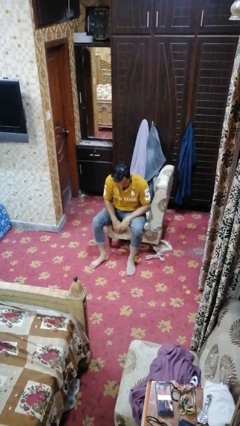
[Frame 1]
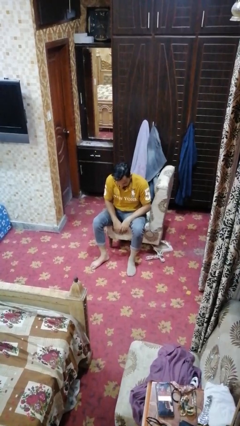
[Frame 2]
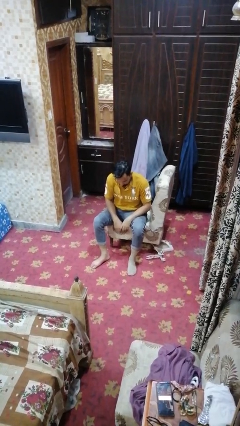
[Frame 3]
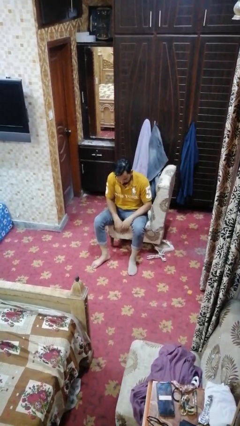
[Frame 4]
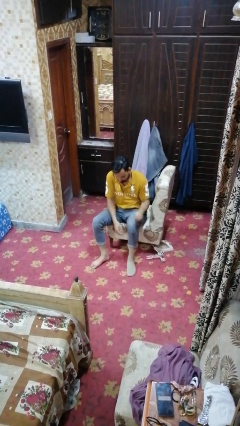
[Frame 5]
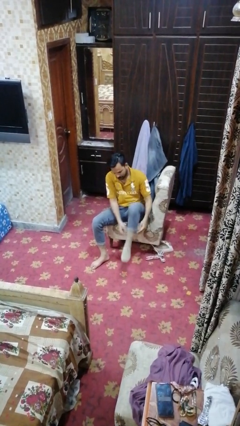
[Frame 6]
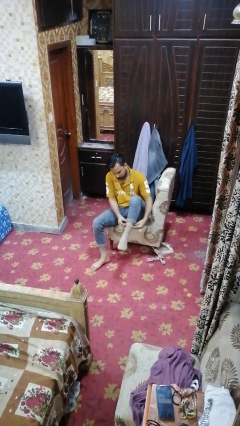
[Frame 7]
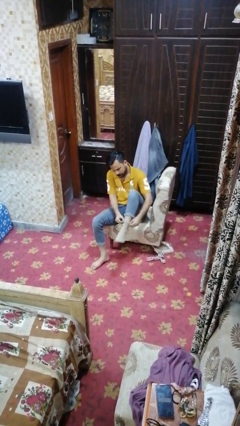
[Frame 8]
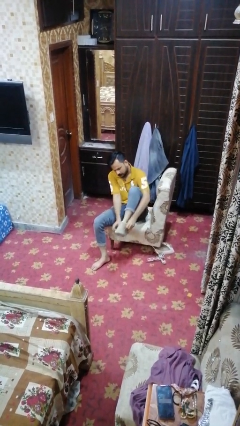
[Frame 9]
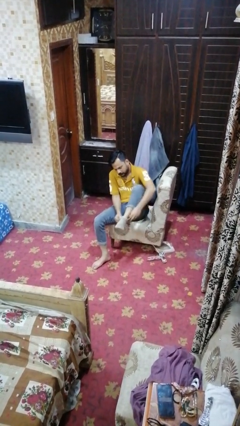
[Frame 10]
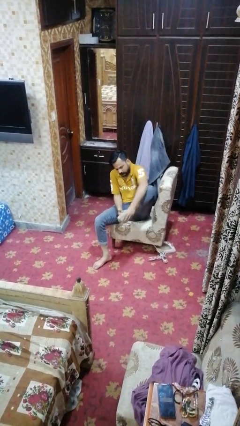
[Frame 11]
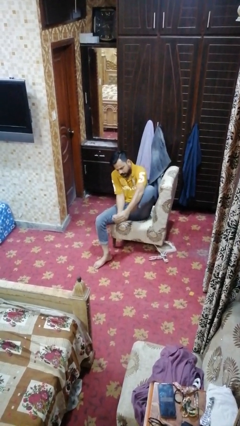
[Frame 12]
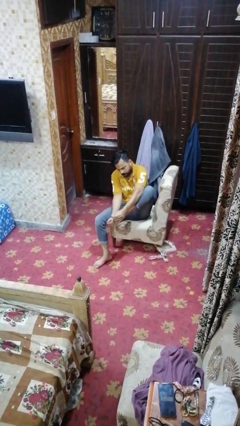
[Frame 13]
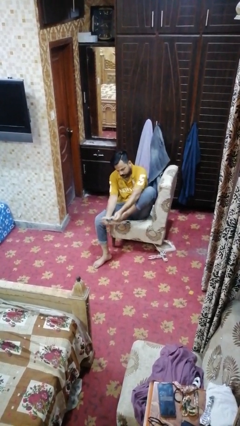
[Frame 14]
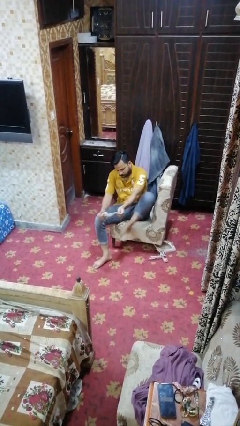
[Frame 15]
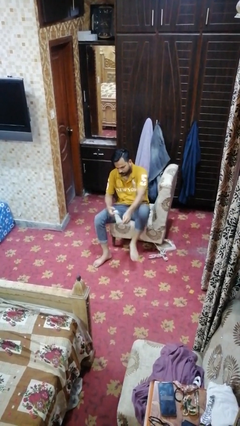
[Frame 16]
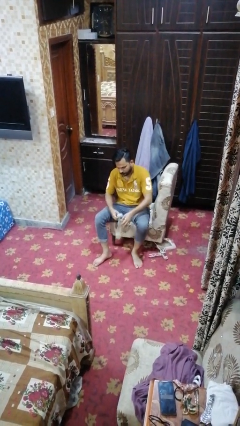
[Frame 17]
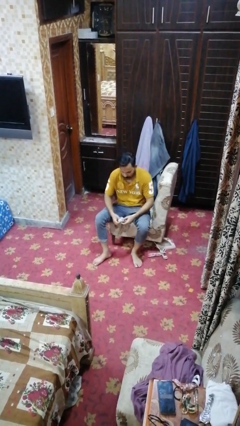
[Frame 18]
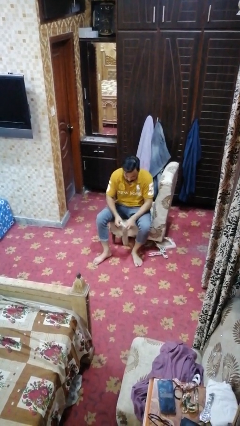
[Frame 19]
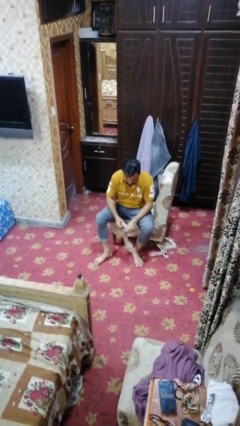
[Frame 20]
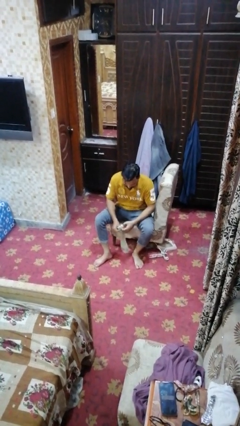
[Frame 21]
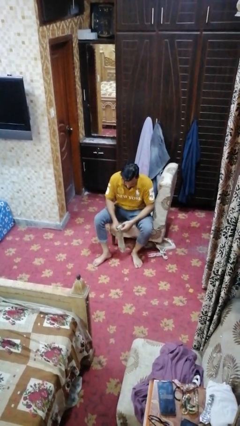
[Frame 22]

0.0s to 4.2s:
person takes off socks

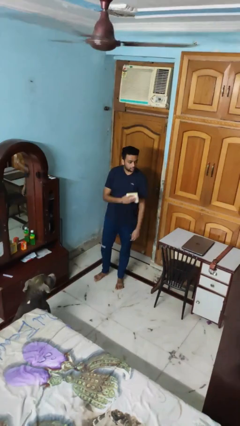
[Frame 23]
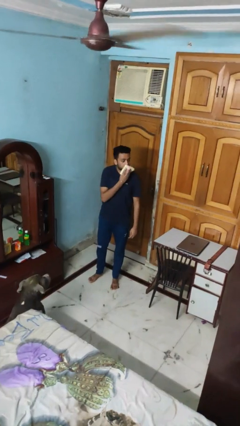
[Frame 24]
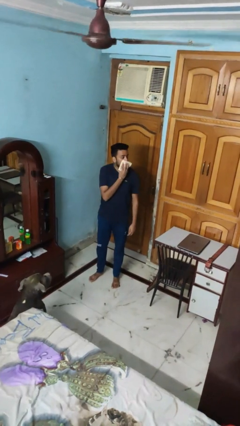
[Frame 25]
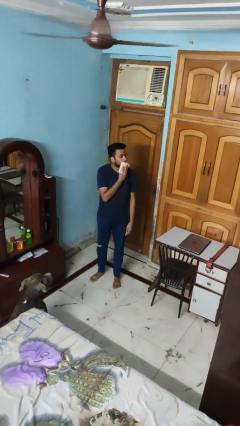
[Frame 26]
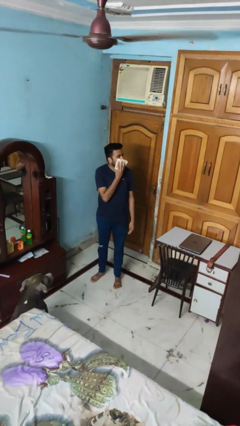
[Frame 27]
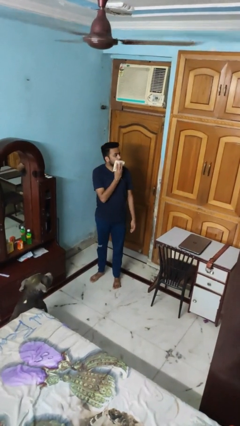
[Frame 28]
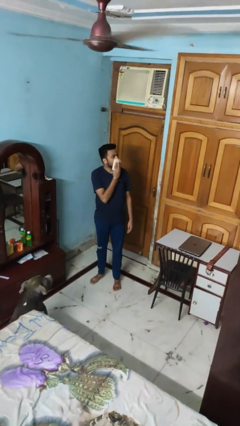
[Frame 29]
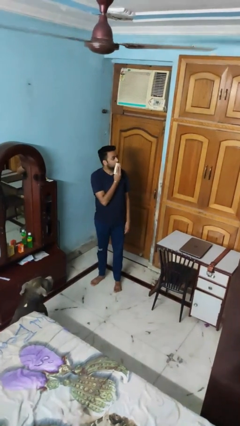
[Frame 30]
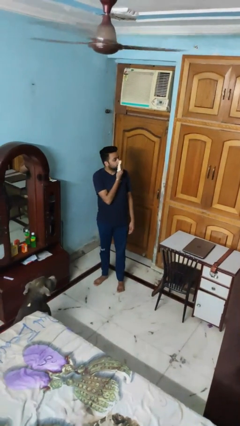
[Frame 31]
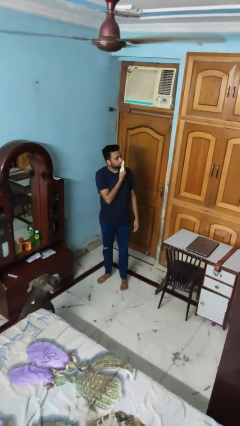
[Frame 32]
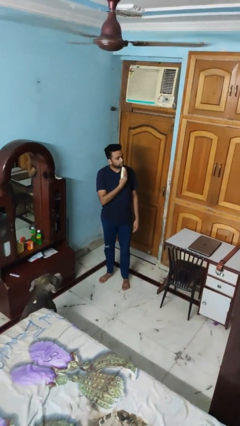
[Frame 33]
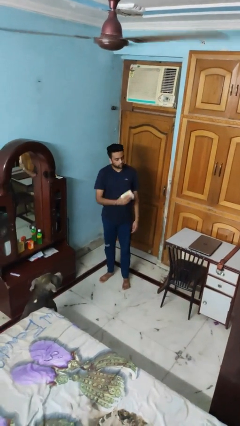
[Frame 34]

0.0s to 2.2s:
person wipes mouth with napkin

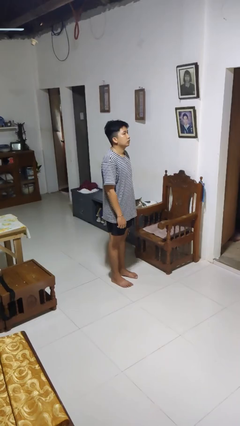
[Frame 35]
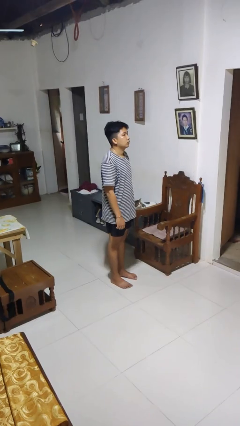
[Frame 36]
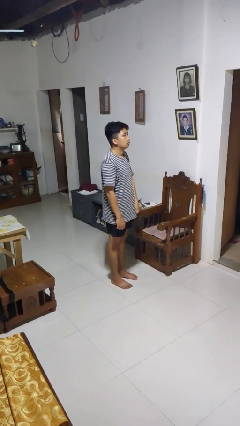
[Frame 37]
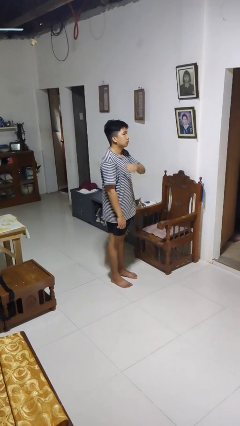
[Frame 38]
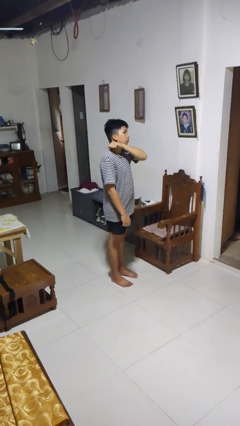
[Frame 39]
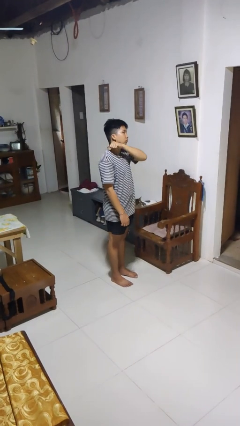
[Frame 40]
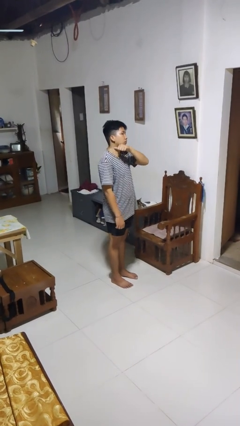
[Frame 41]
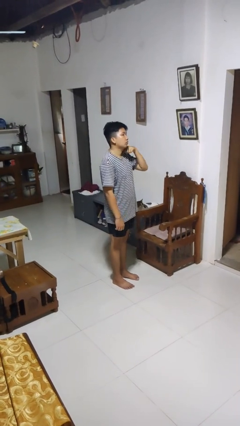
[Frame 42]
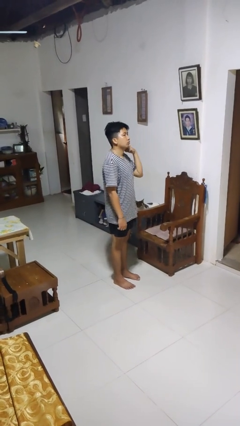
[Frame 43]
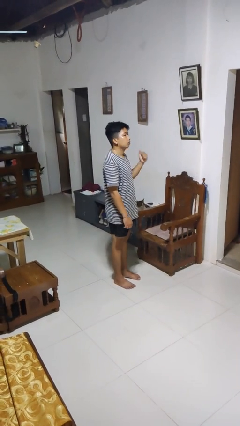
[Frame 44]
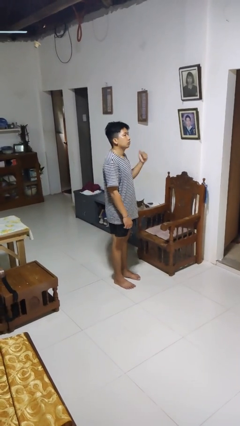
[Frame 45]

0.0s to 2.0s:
person gestures cut

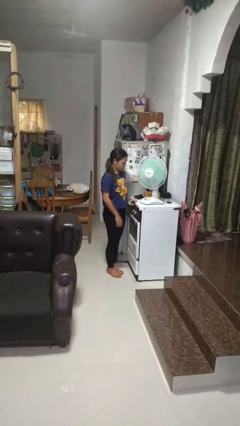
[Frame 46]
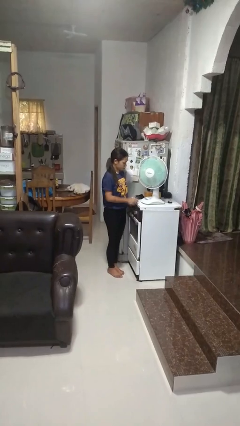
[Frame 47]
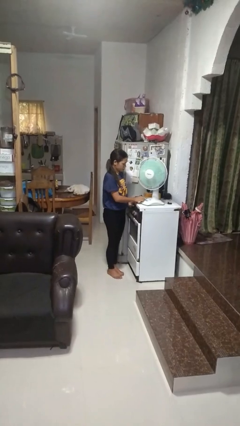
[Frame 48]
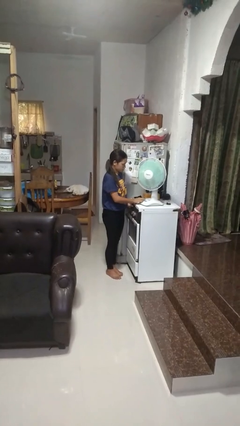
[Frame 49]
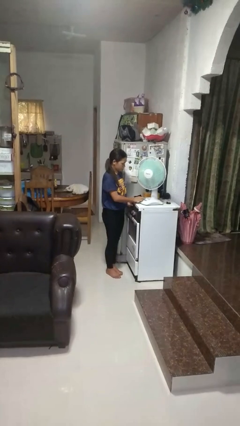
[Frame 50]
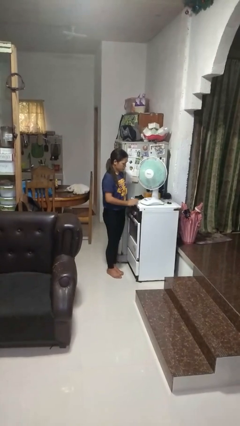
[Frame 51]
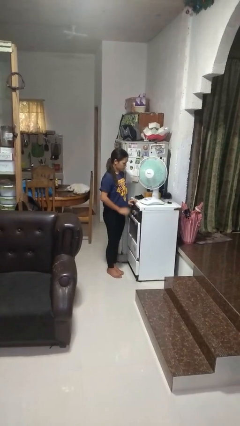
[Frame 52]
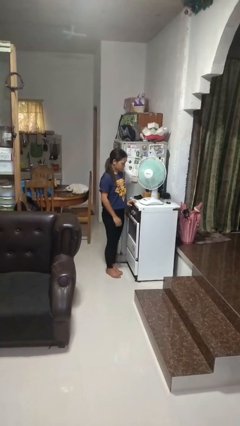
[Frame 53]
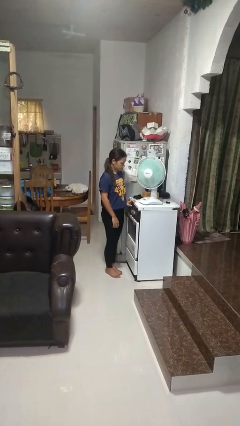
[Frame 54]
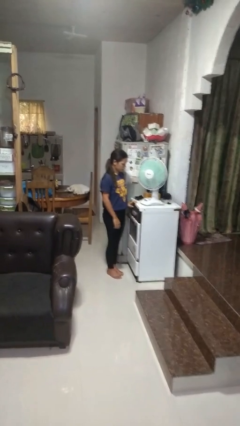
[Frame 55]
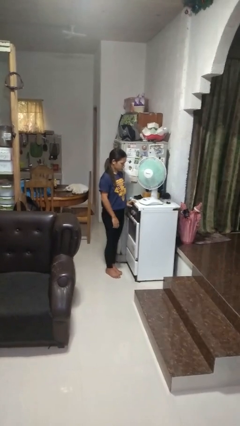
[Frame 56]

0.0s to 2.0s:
person turns off fan

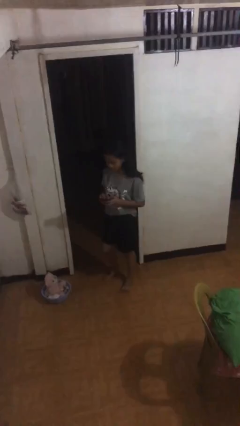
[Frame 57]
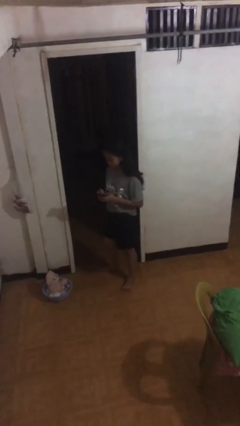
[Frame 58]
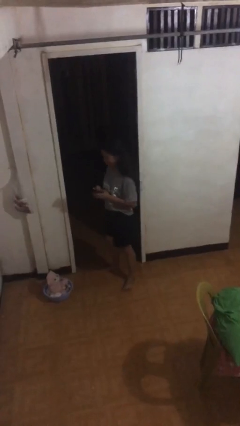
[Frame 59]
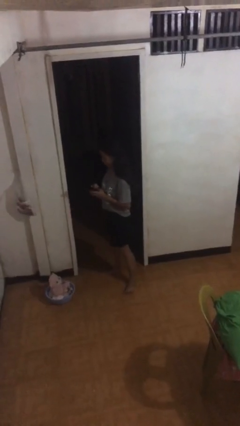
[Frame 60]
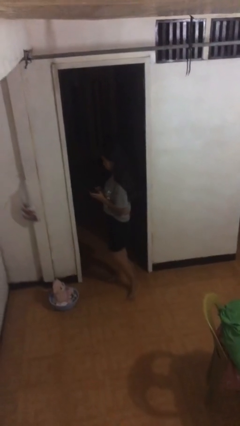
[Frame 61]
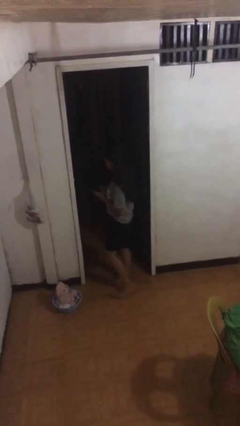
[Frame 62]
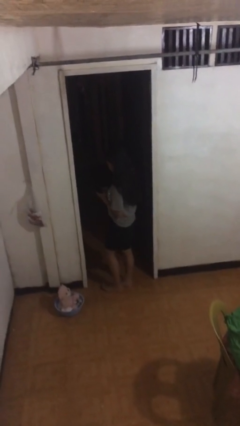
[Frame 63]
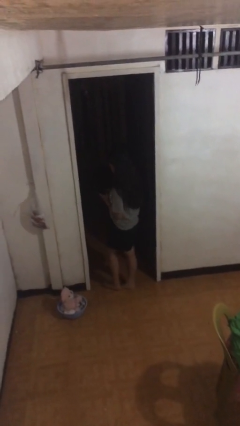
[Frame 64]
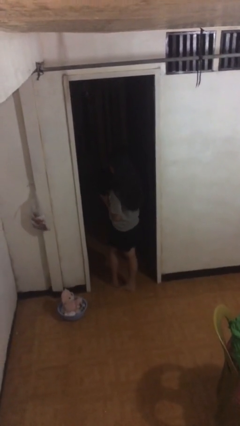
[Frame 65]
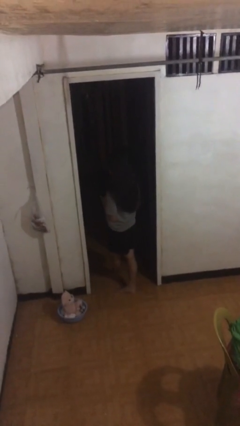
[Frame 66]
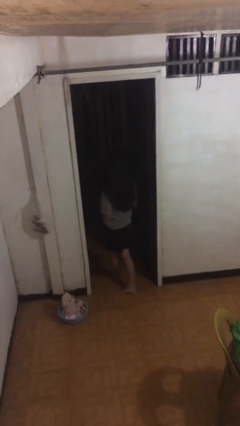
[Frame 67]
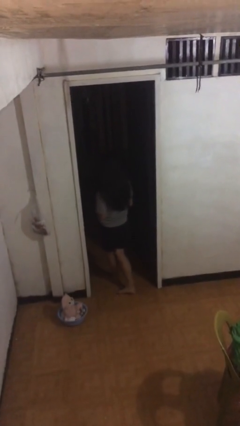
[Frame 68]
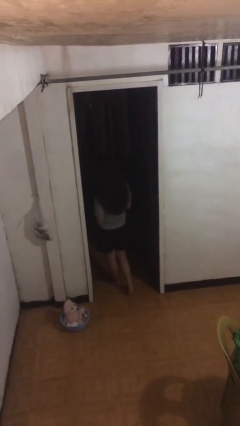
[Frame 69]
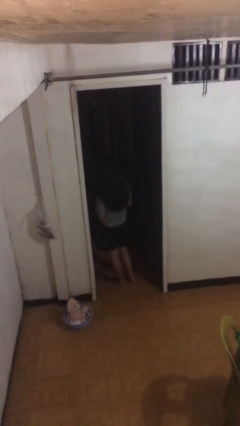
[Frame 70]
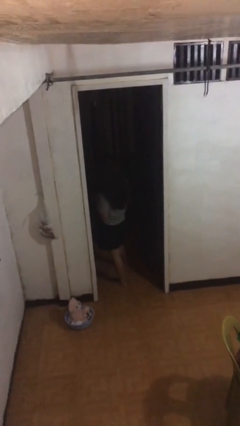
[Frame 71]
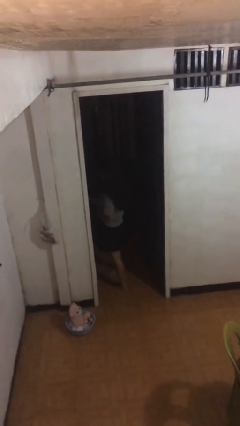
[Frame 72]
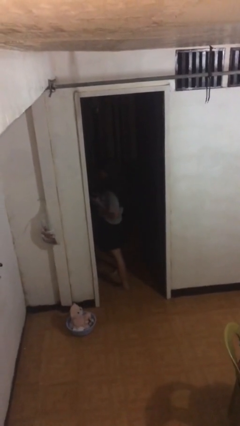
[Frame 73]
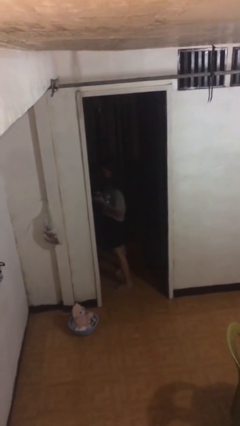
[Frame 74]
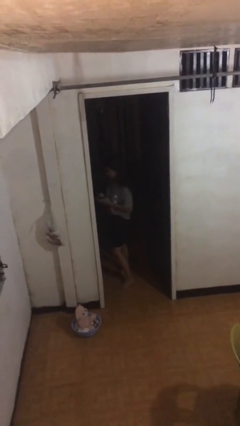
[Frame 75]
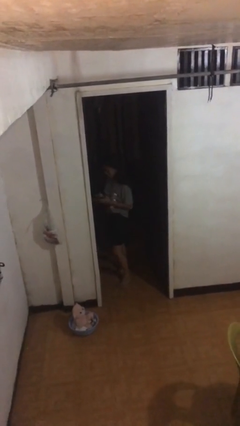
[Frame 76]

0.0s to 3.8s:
person exits scene through structure

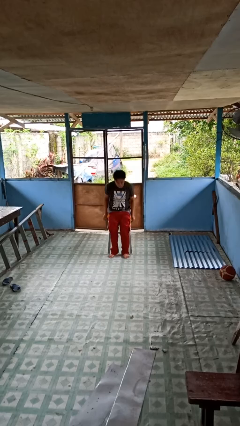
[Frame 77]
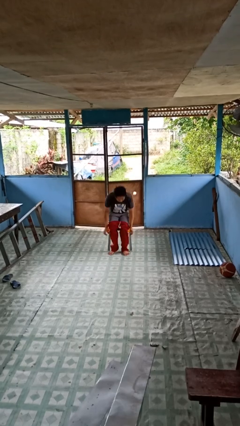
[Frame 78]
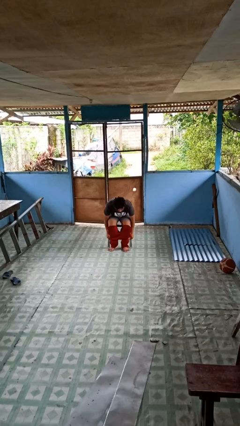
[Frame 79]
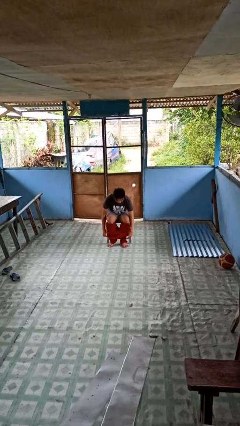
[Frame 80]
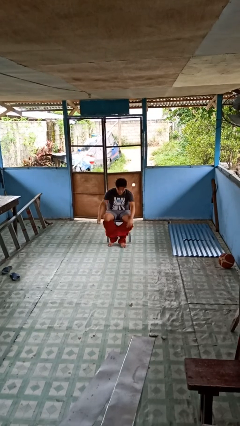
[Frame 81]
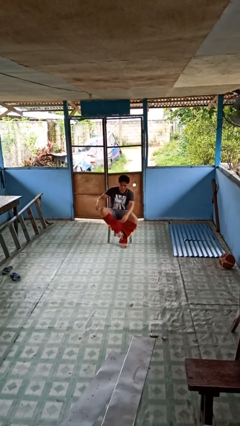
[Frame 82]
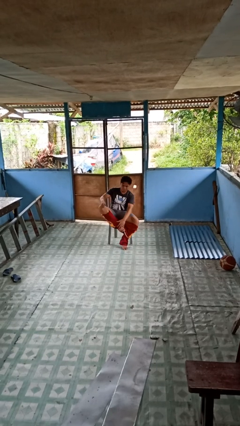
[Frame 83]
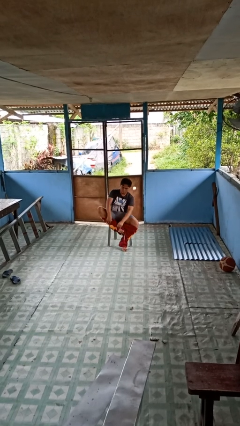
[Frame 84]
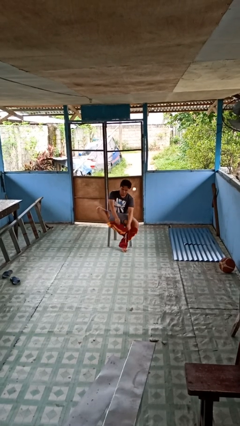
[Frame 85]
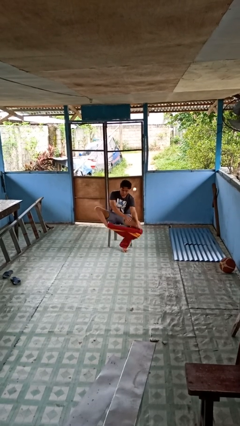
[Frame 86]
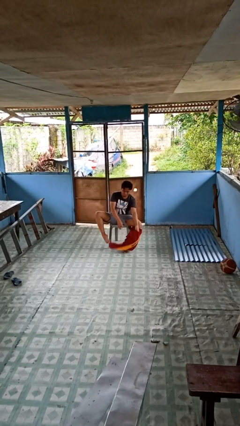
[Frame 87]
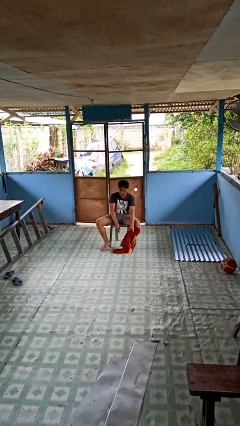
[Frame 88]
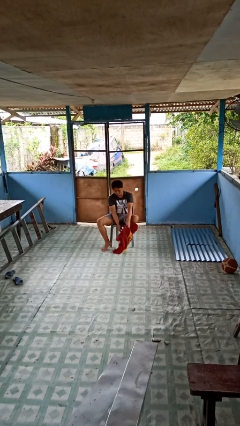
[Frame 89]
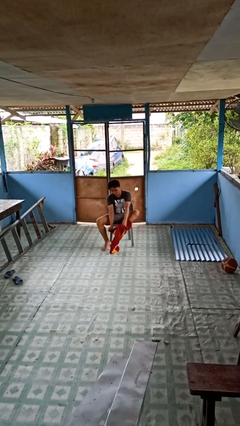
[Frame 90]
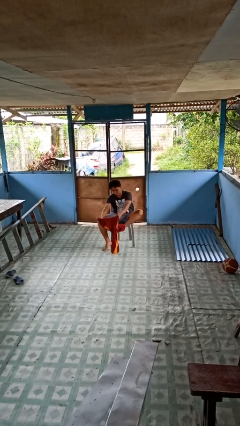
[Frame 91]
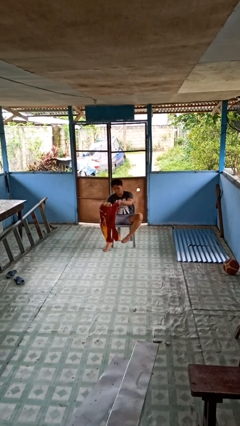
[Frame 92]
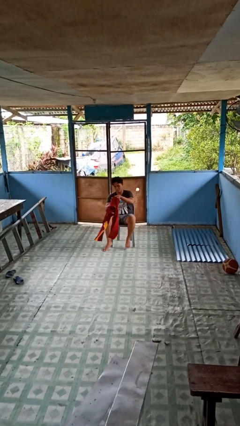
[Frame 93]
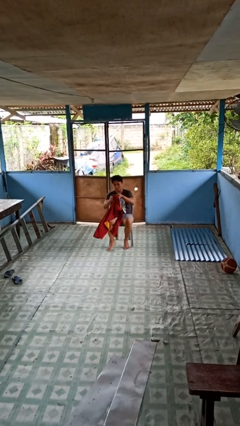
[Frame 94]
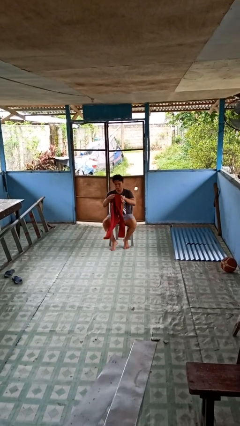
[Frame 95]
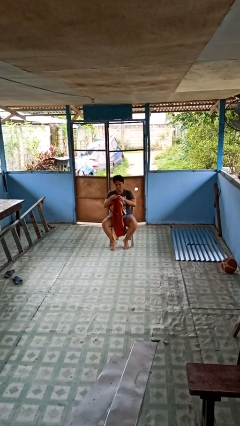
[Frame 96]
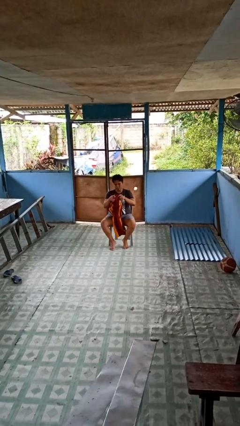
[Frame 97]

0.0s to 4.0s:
person takes off pants
